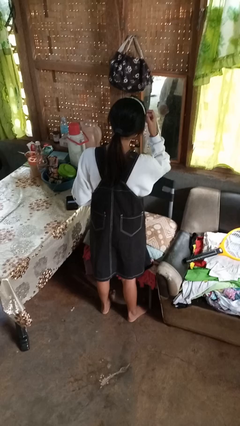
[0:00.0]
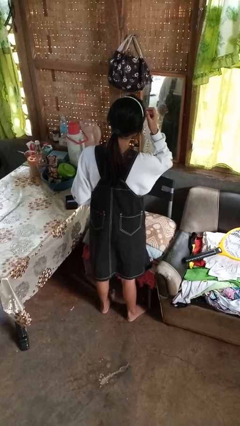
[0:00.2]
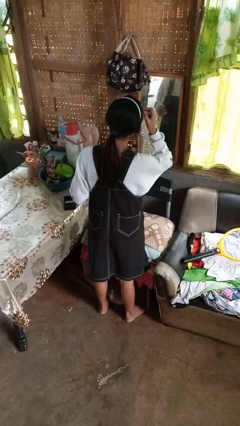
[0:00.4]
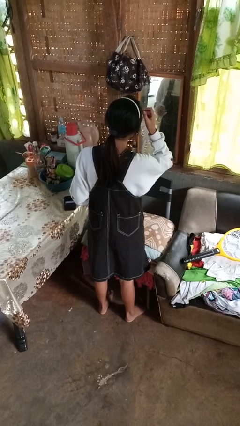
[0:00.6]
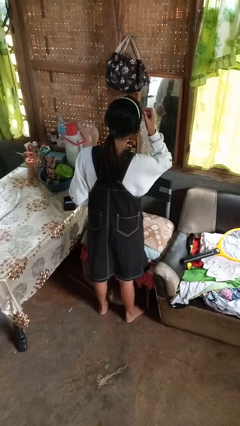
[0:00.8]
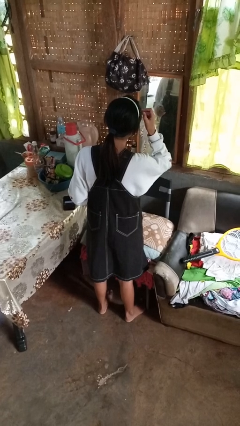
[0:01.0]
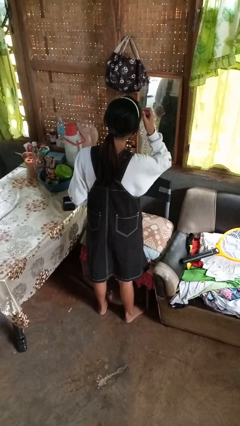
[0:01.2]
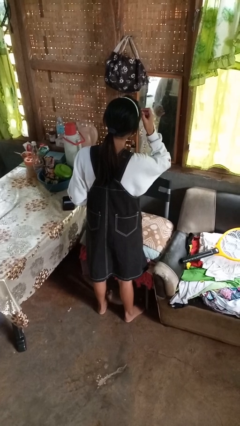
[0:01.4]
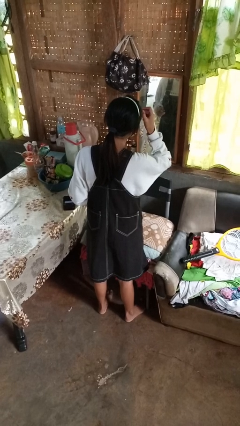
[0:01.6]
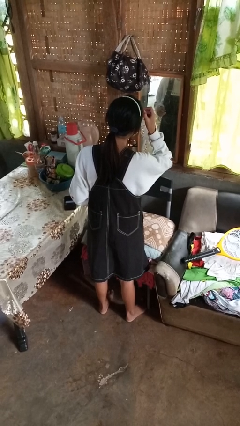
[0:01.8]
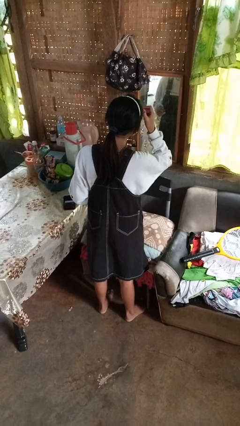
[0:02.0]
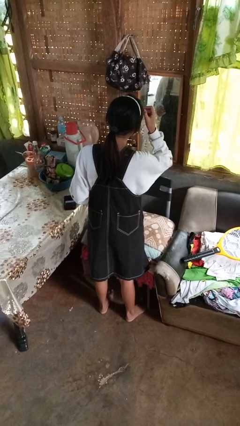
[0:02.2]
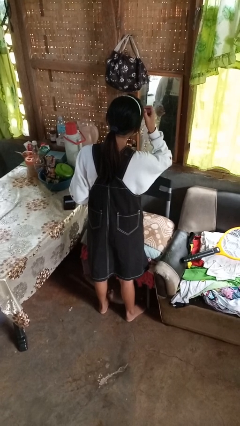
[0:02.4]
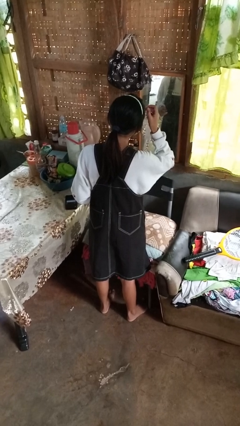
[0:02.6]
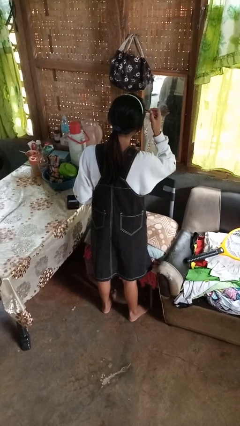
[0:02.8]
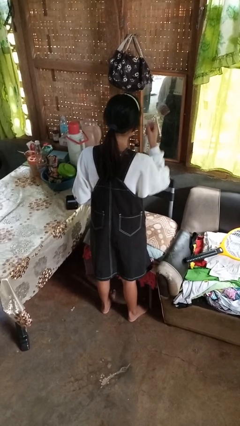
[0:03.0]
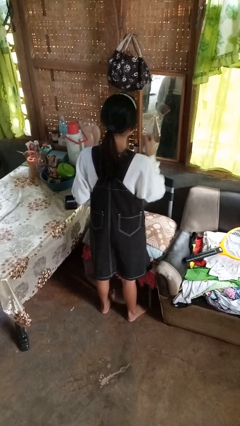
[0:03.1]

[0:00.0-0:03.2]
person applies eye makeup

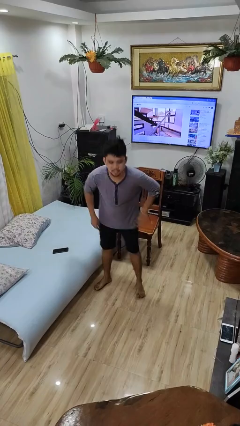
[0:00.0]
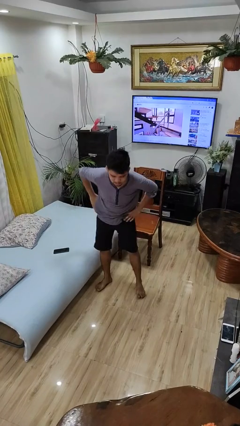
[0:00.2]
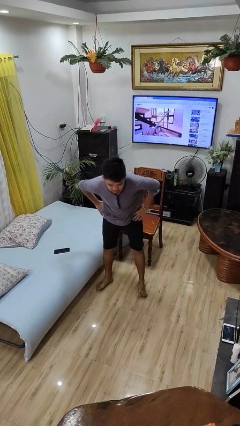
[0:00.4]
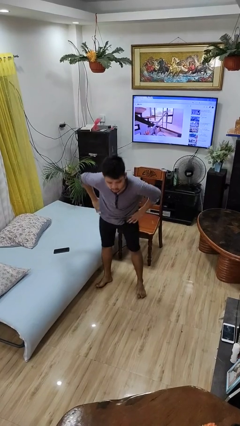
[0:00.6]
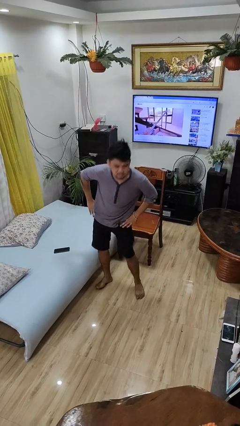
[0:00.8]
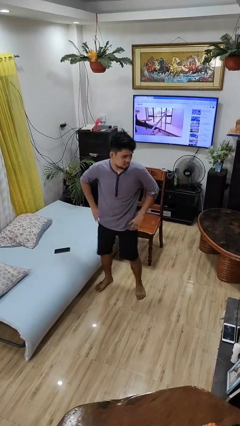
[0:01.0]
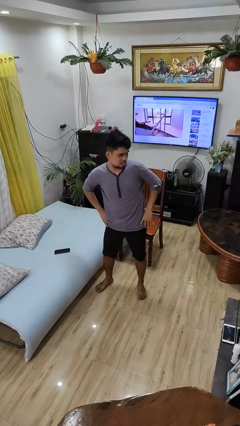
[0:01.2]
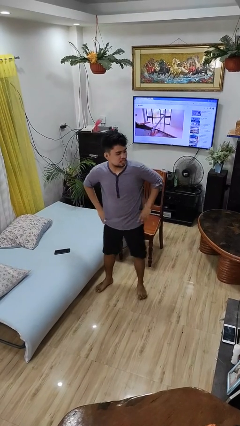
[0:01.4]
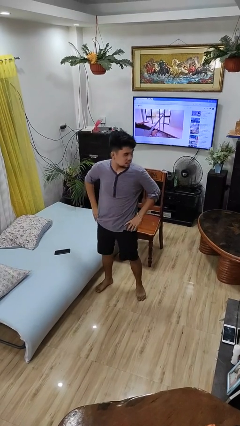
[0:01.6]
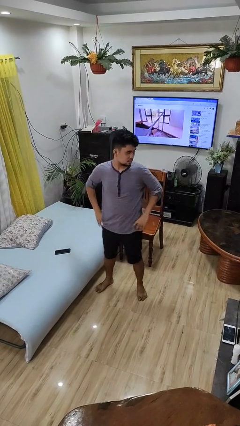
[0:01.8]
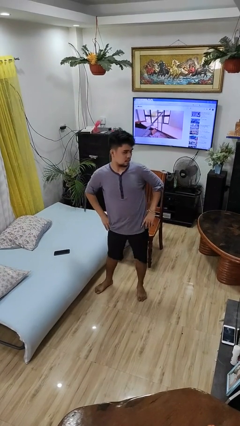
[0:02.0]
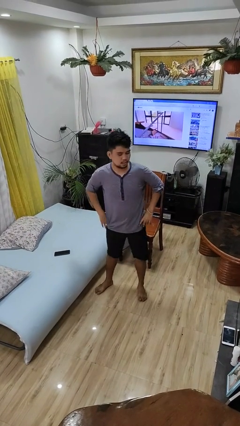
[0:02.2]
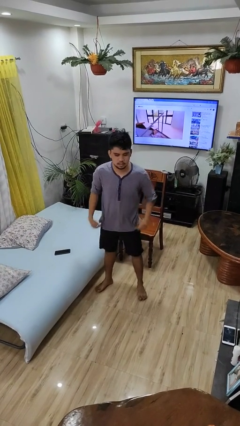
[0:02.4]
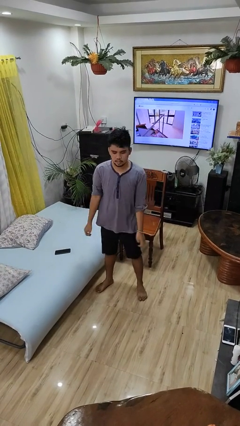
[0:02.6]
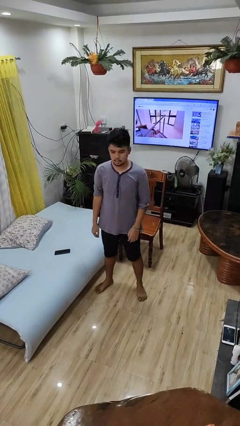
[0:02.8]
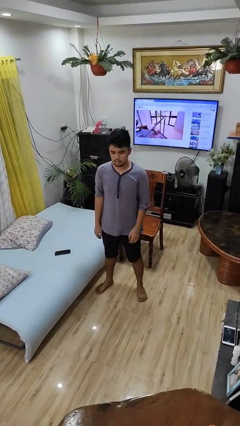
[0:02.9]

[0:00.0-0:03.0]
person wiggles hips

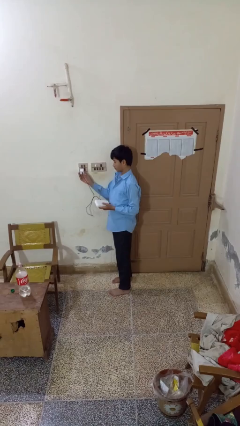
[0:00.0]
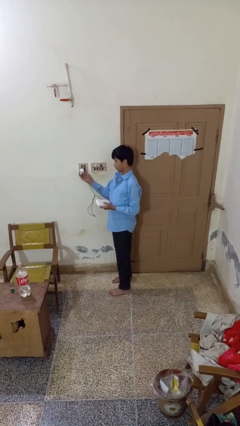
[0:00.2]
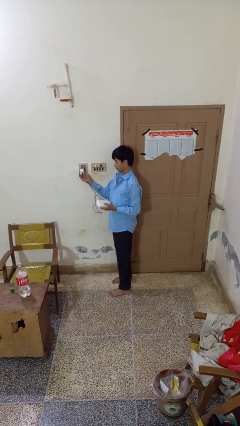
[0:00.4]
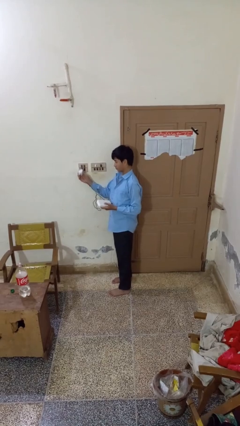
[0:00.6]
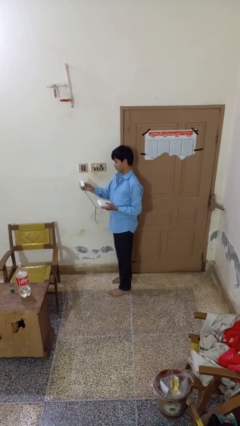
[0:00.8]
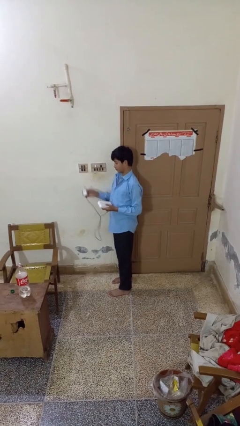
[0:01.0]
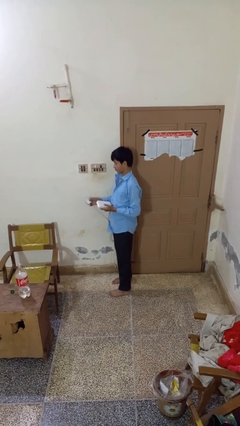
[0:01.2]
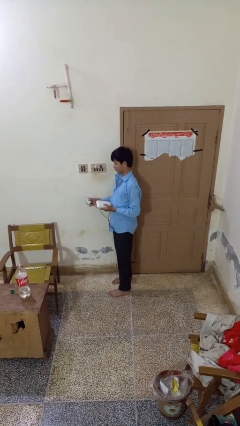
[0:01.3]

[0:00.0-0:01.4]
person unplugs from electrical socket

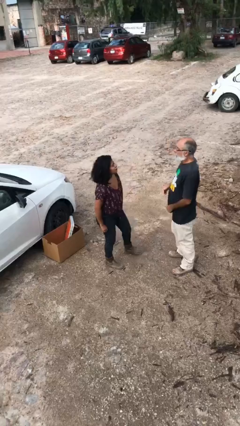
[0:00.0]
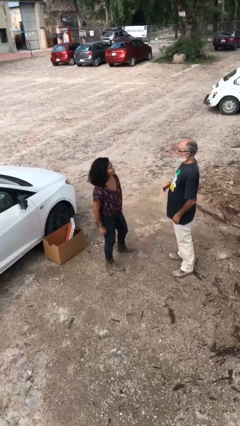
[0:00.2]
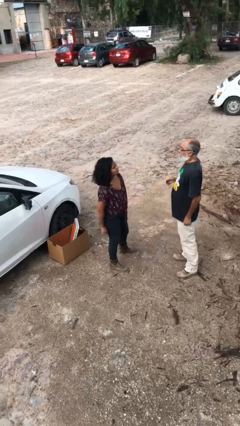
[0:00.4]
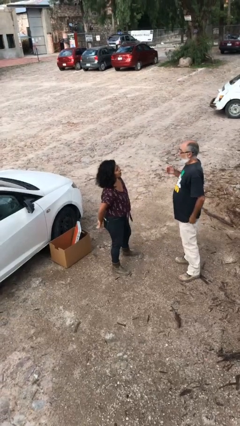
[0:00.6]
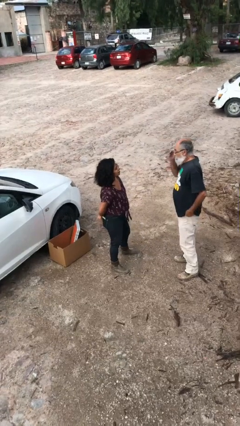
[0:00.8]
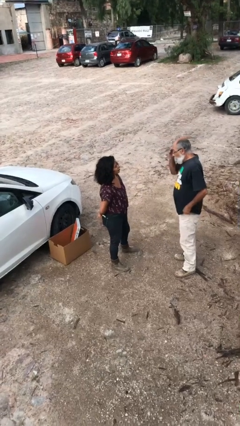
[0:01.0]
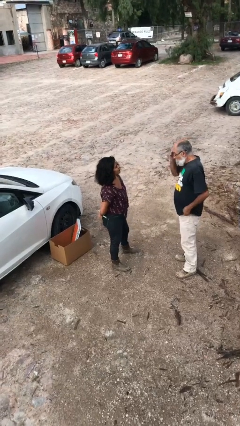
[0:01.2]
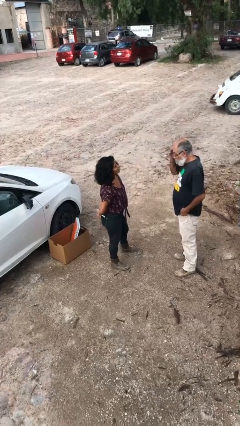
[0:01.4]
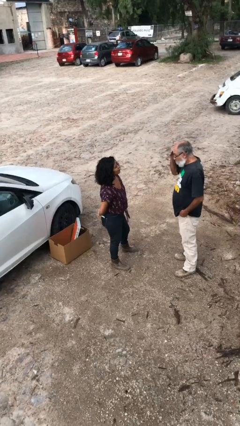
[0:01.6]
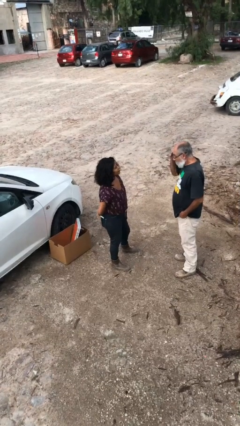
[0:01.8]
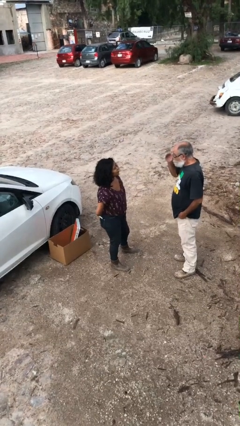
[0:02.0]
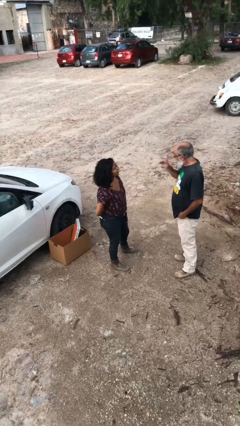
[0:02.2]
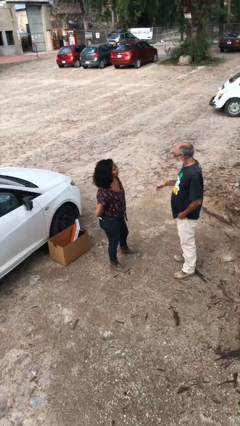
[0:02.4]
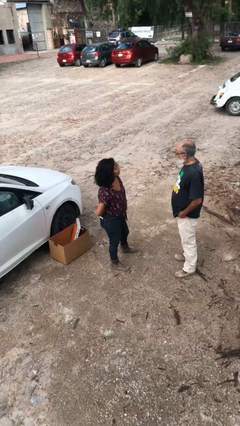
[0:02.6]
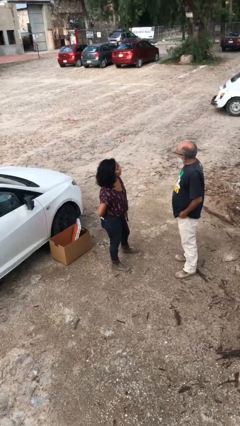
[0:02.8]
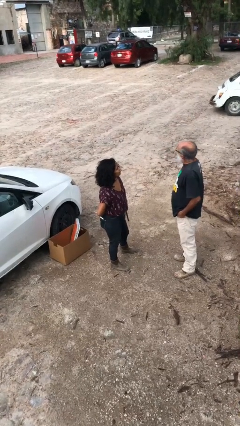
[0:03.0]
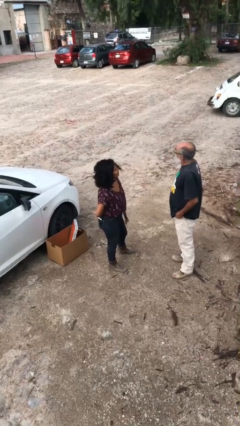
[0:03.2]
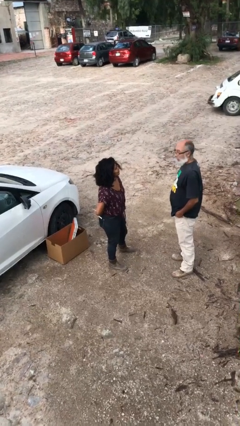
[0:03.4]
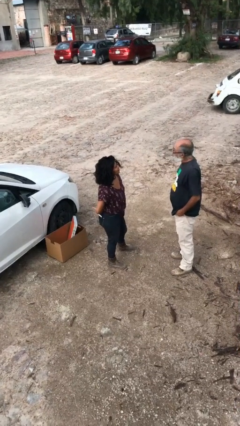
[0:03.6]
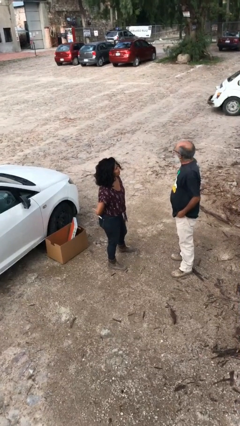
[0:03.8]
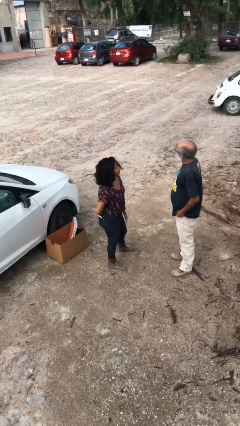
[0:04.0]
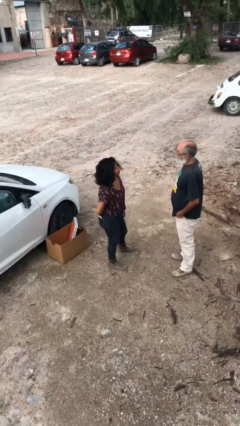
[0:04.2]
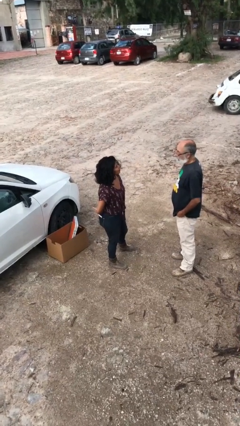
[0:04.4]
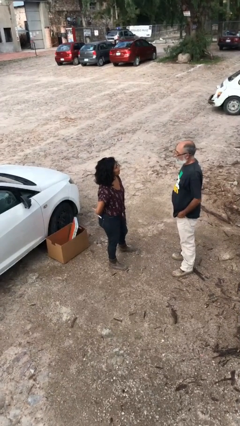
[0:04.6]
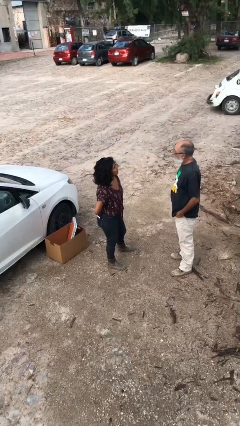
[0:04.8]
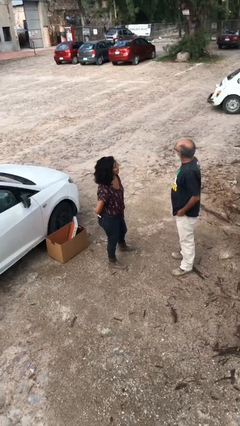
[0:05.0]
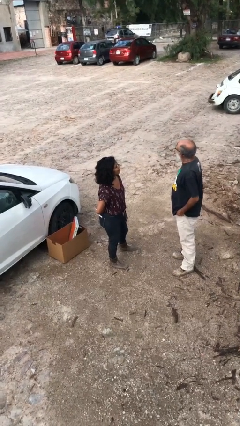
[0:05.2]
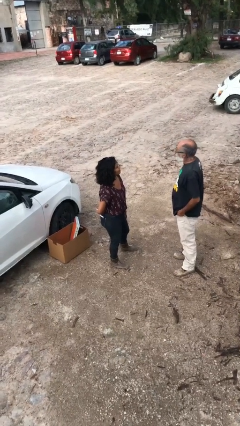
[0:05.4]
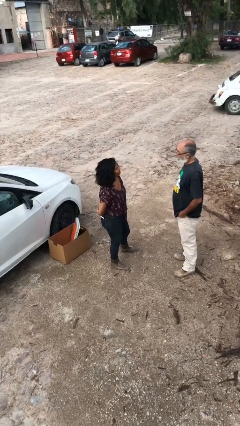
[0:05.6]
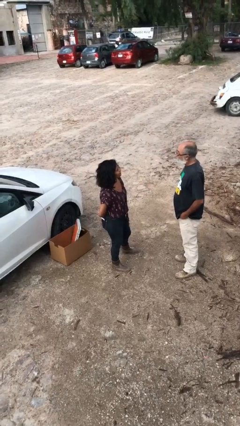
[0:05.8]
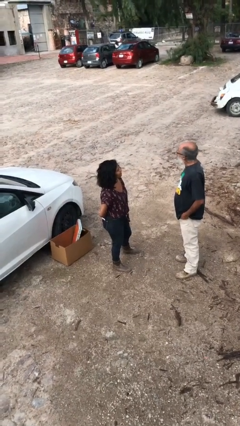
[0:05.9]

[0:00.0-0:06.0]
person talks to person

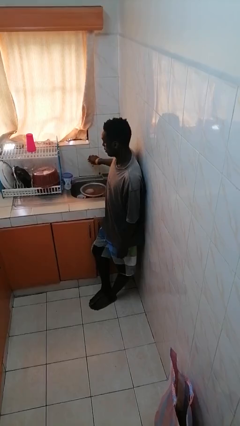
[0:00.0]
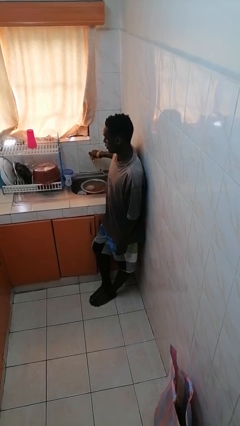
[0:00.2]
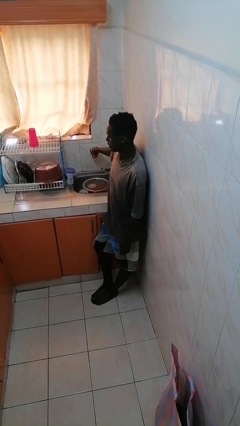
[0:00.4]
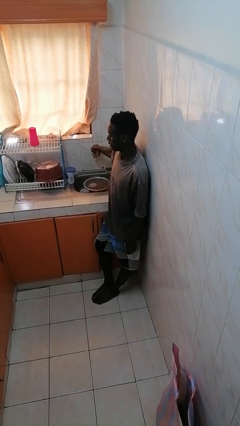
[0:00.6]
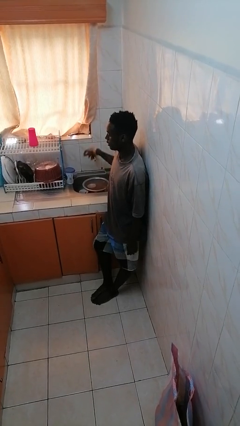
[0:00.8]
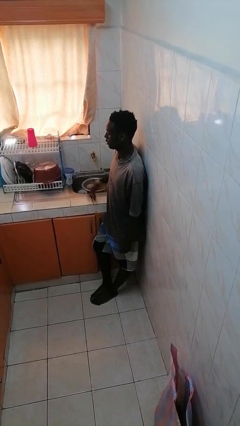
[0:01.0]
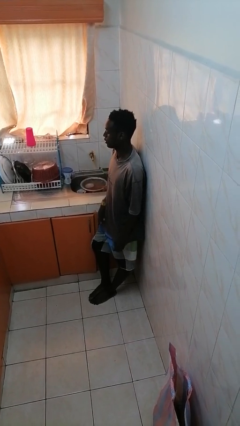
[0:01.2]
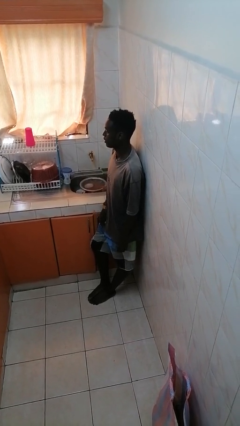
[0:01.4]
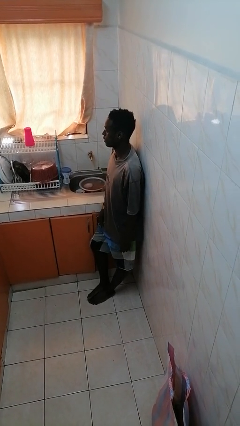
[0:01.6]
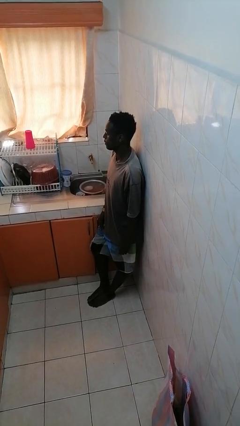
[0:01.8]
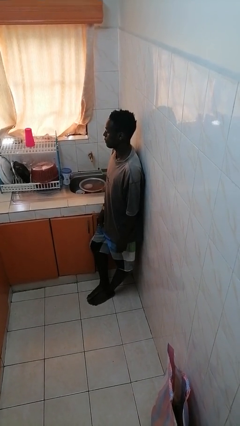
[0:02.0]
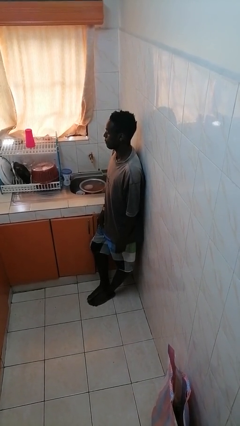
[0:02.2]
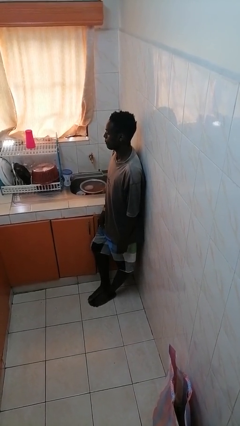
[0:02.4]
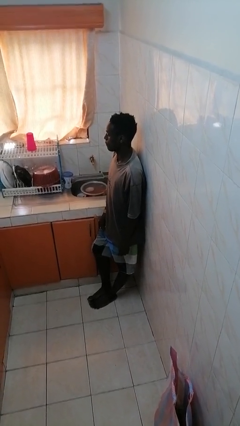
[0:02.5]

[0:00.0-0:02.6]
person turns off faucet

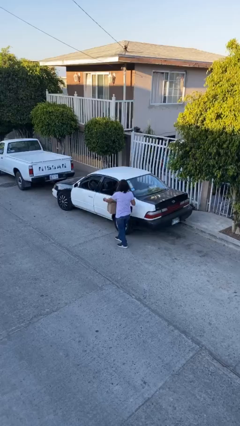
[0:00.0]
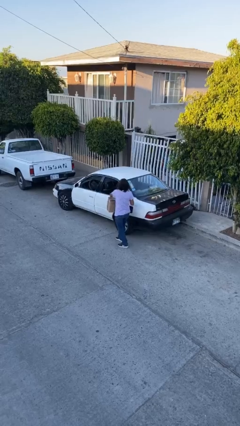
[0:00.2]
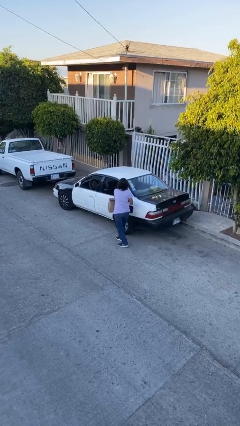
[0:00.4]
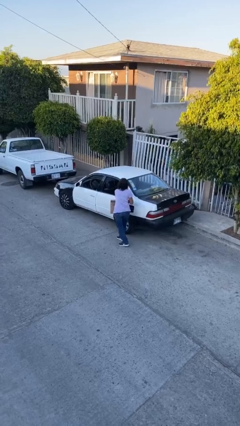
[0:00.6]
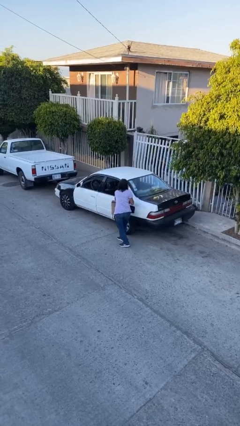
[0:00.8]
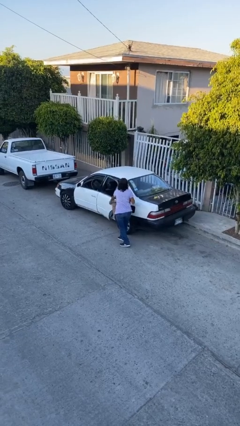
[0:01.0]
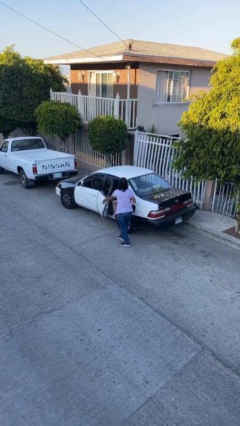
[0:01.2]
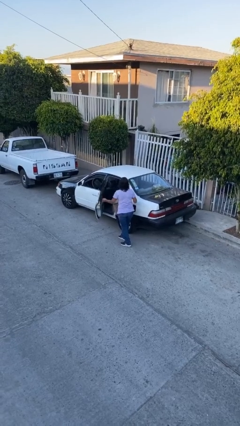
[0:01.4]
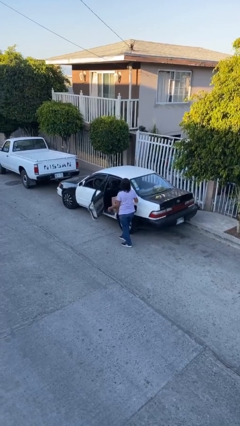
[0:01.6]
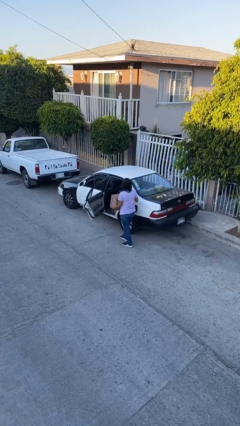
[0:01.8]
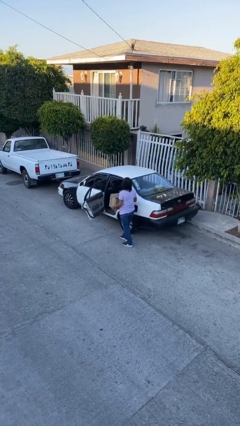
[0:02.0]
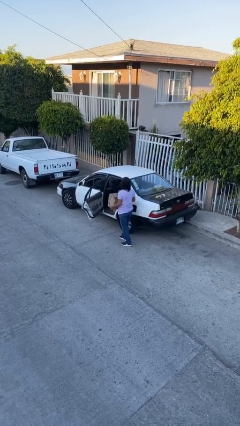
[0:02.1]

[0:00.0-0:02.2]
person opens car door
